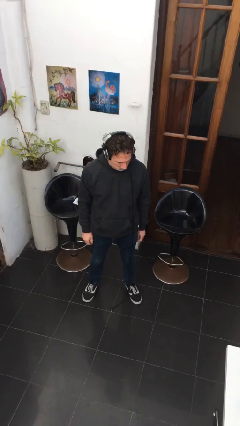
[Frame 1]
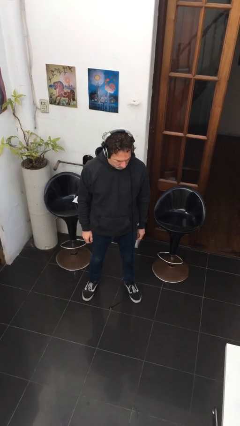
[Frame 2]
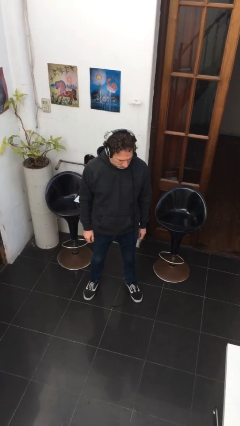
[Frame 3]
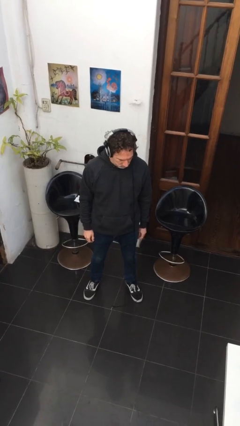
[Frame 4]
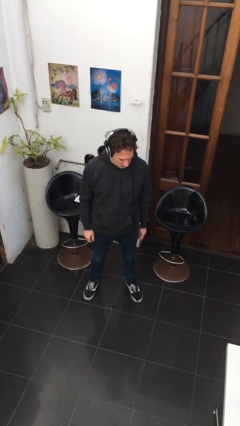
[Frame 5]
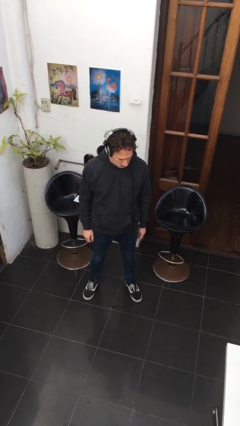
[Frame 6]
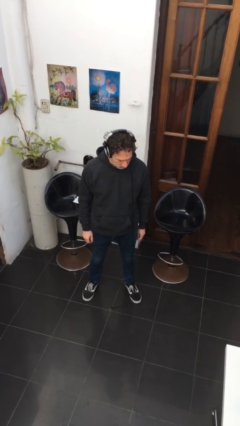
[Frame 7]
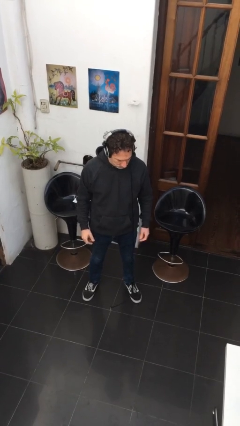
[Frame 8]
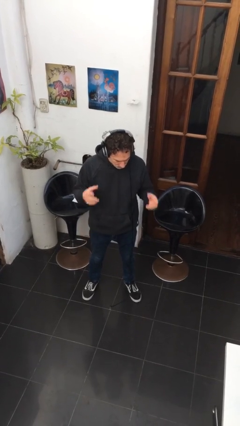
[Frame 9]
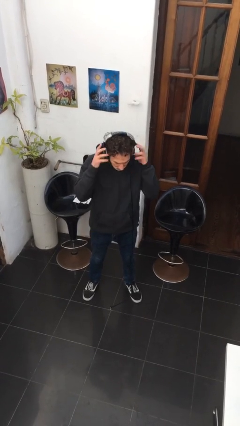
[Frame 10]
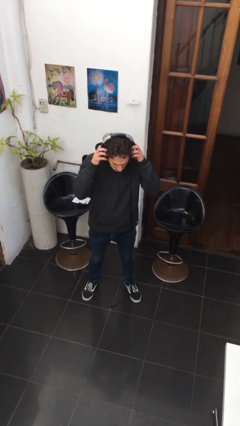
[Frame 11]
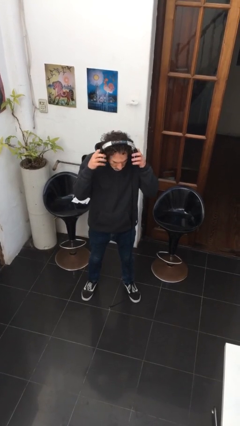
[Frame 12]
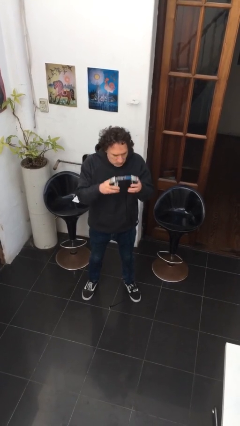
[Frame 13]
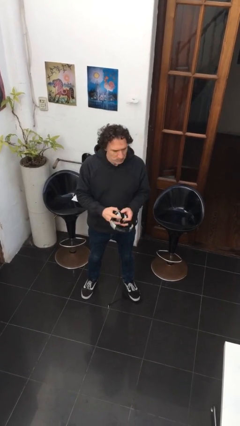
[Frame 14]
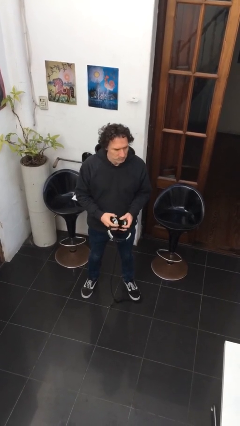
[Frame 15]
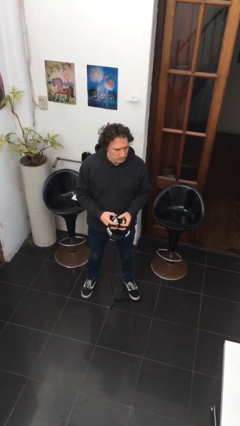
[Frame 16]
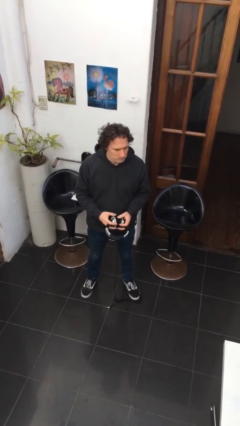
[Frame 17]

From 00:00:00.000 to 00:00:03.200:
person takes off headphones

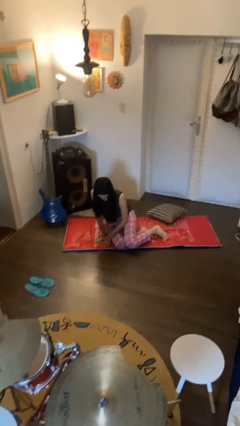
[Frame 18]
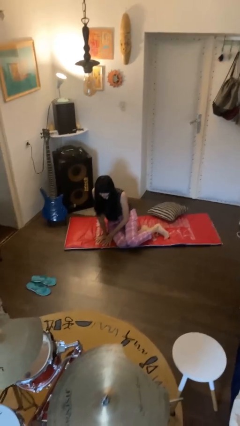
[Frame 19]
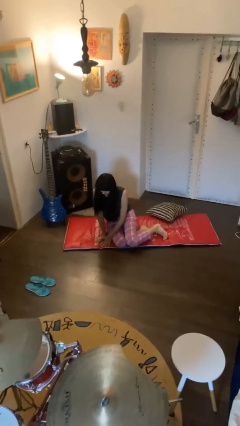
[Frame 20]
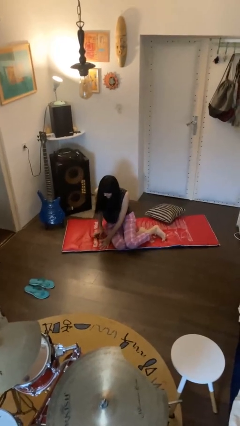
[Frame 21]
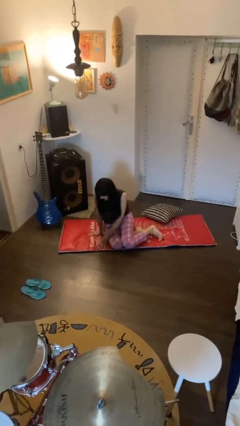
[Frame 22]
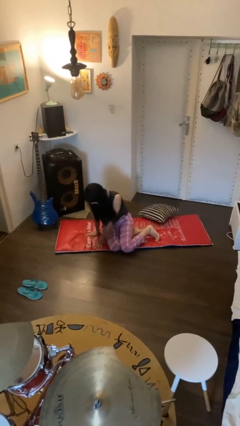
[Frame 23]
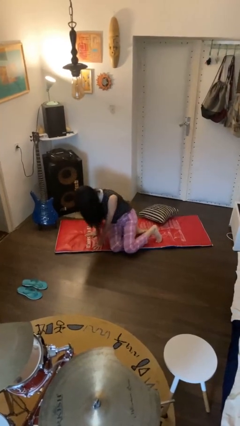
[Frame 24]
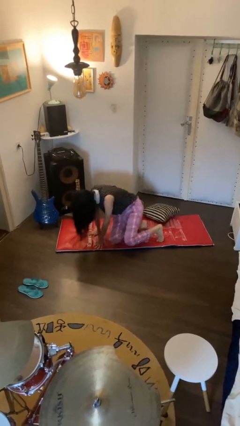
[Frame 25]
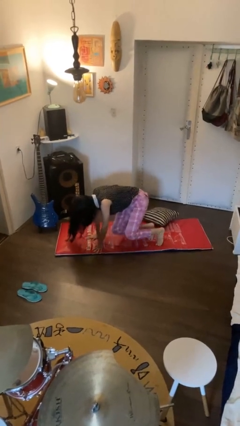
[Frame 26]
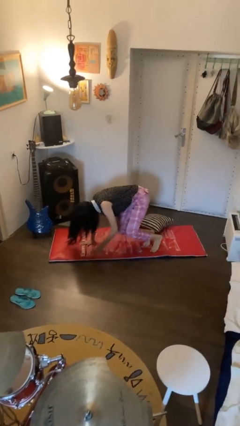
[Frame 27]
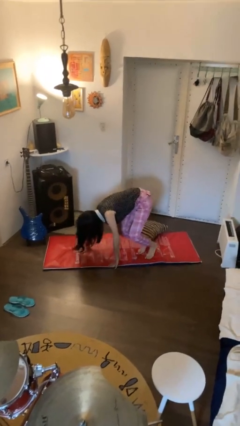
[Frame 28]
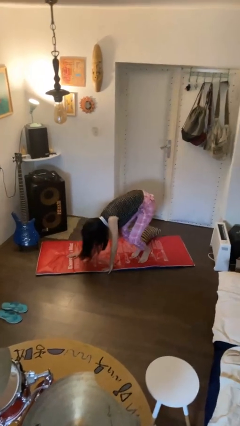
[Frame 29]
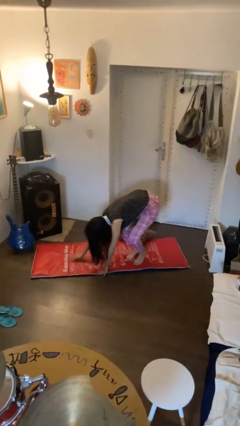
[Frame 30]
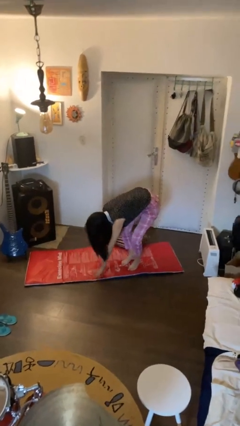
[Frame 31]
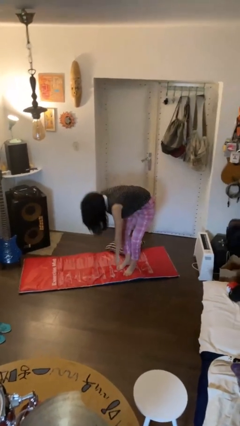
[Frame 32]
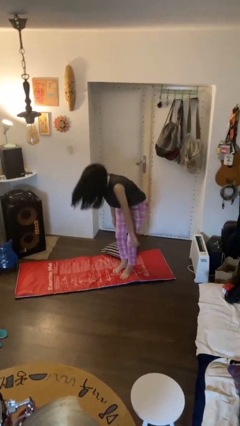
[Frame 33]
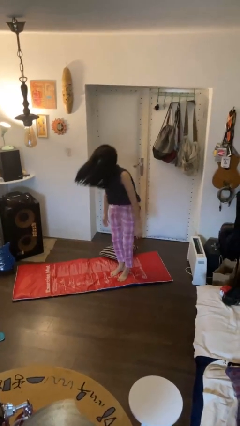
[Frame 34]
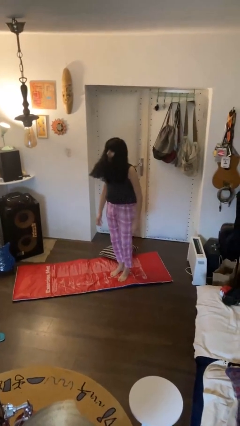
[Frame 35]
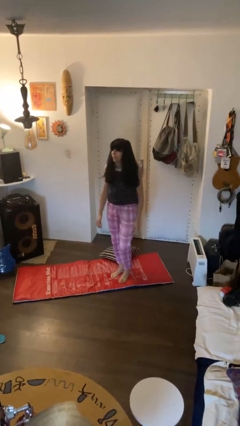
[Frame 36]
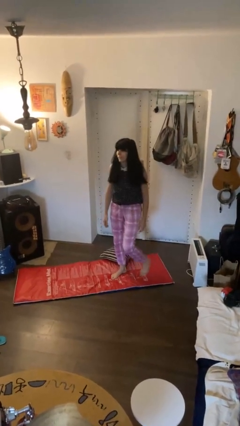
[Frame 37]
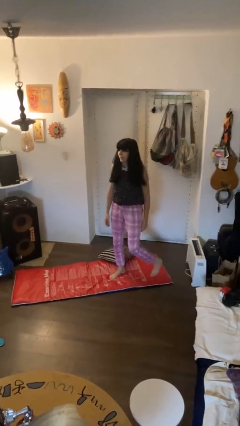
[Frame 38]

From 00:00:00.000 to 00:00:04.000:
person stands up from floor

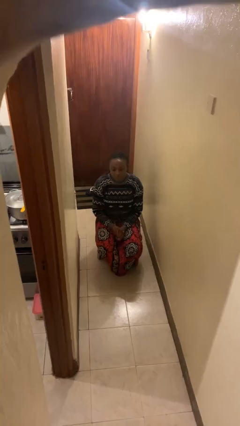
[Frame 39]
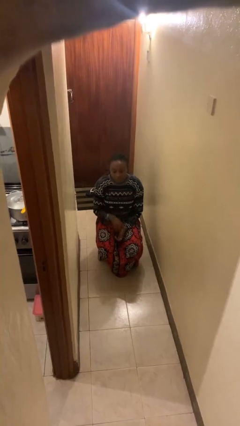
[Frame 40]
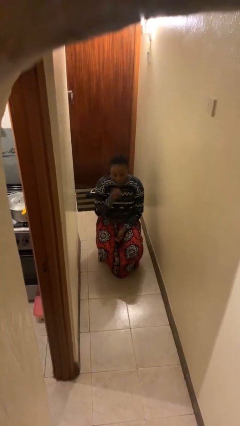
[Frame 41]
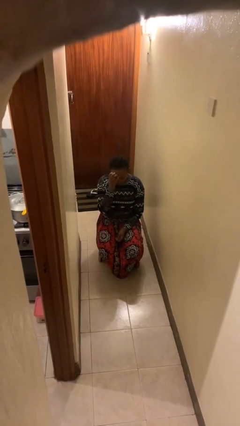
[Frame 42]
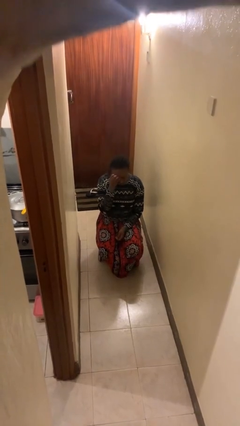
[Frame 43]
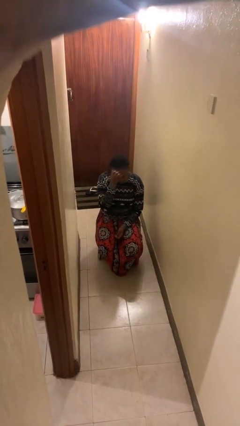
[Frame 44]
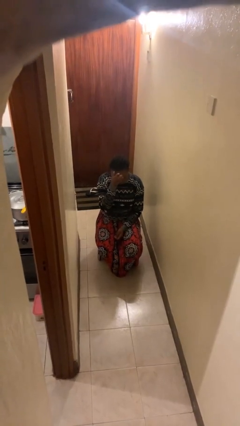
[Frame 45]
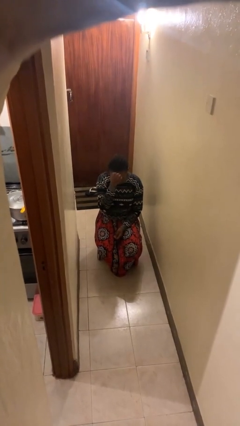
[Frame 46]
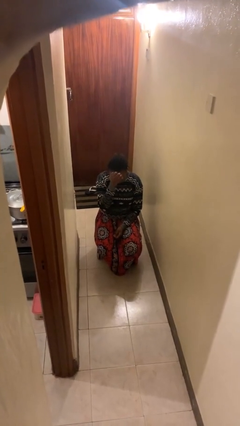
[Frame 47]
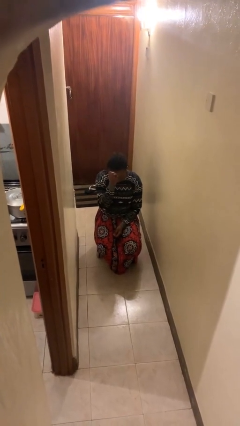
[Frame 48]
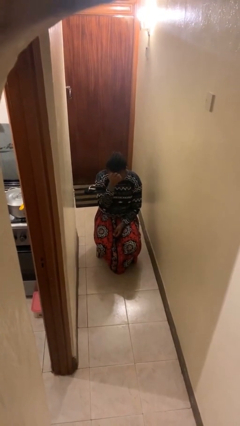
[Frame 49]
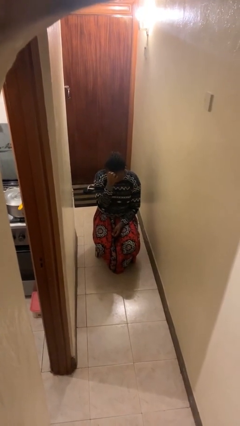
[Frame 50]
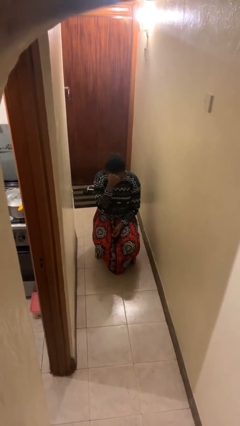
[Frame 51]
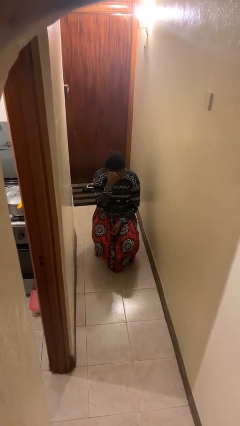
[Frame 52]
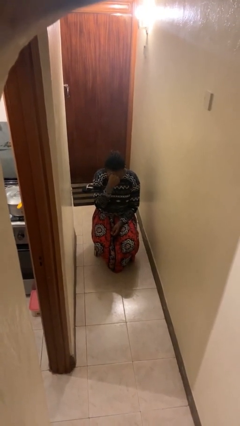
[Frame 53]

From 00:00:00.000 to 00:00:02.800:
person scratches face

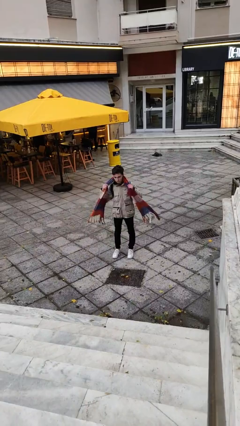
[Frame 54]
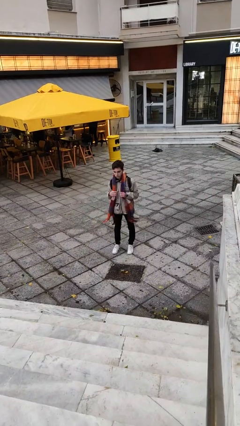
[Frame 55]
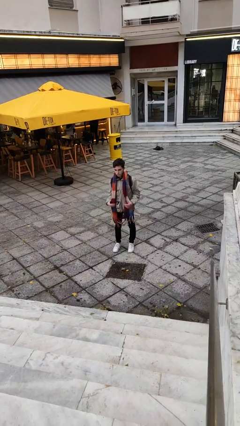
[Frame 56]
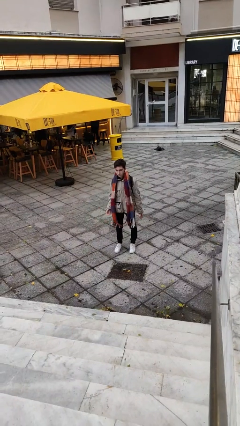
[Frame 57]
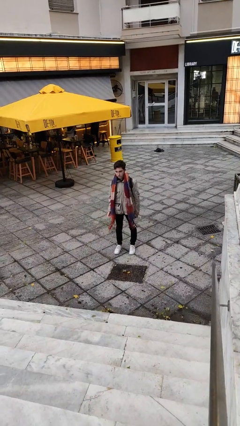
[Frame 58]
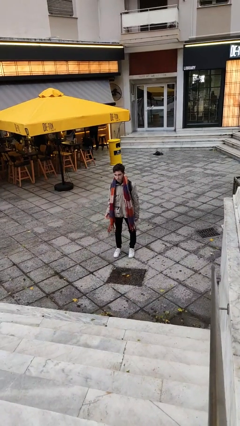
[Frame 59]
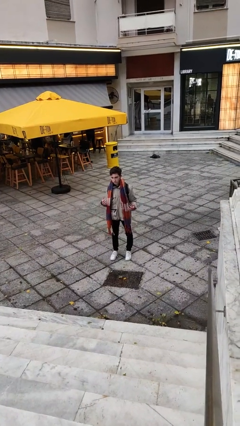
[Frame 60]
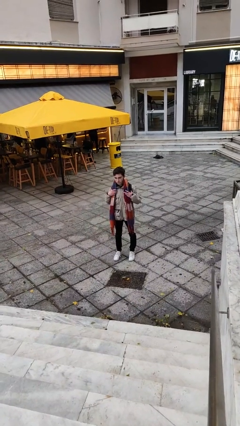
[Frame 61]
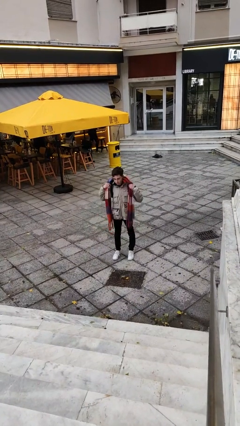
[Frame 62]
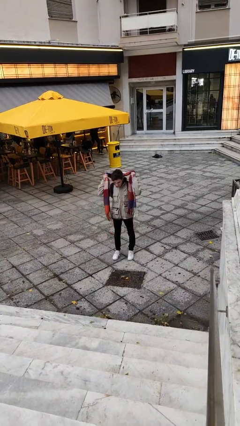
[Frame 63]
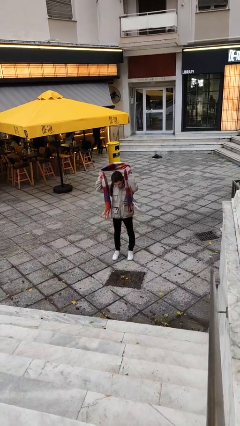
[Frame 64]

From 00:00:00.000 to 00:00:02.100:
person puts on scarf

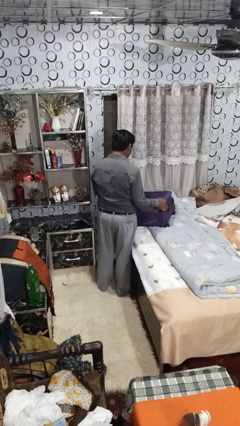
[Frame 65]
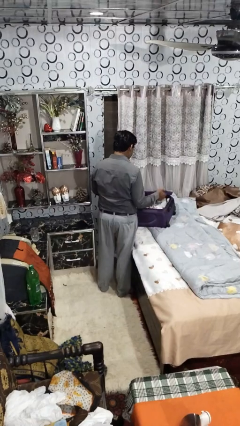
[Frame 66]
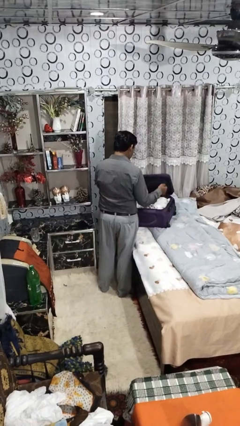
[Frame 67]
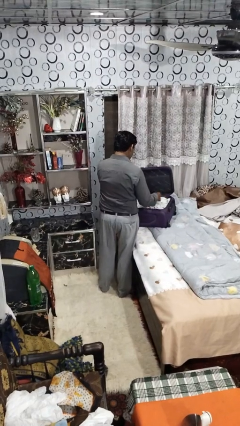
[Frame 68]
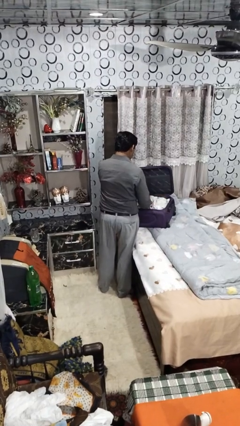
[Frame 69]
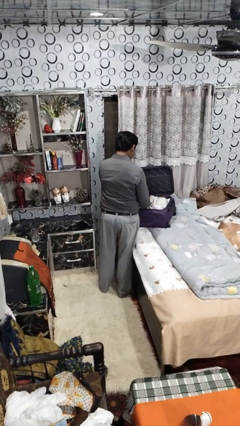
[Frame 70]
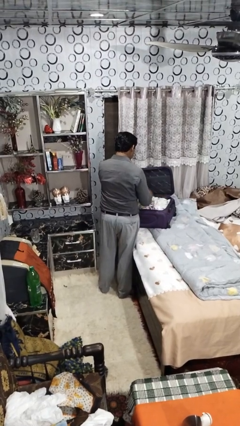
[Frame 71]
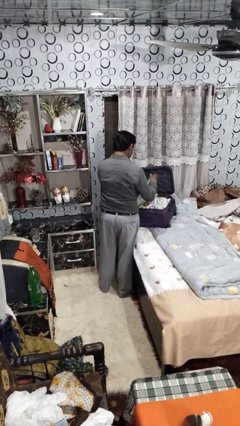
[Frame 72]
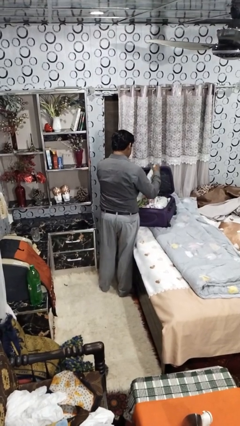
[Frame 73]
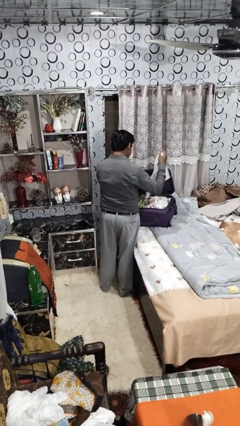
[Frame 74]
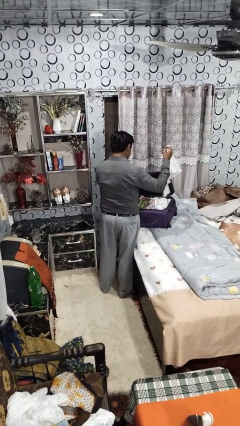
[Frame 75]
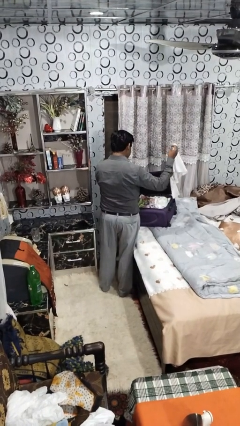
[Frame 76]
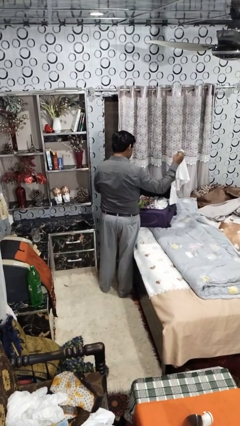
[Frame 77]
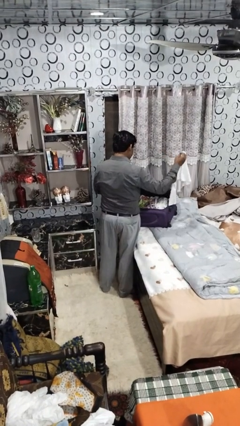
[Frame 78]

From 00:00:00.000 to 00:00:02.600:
person unloads clothes from suitcase

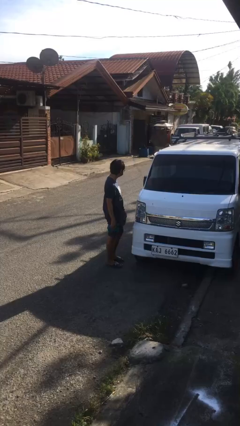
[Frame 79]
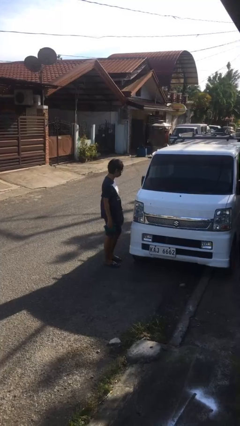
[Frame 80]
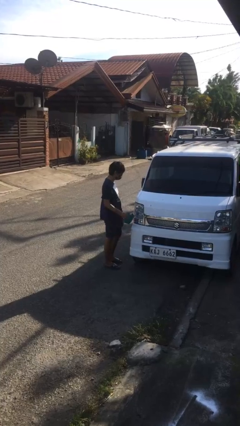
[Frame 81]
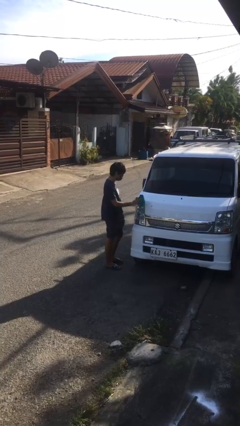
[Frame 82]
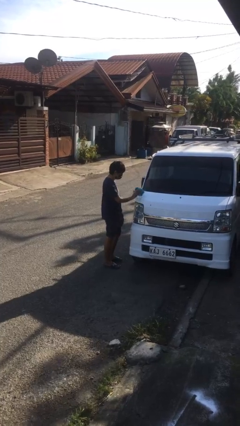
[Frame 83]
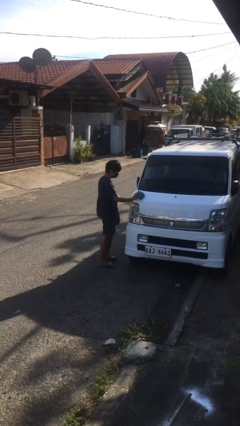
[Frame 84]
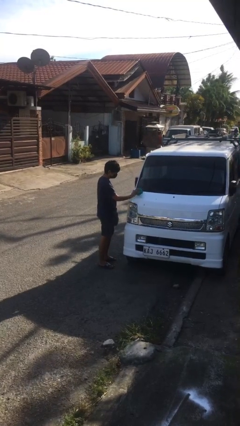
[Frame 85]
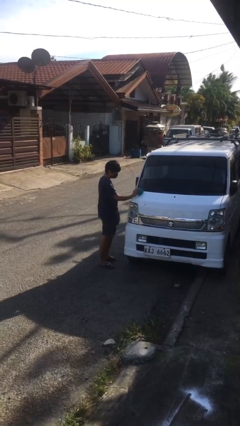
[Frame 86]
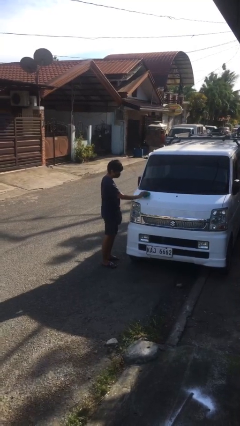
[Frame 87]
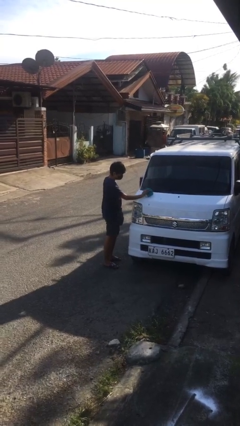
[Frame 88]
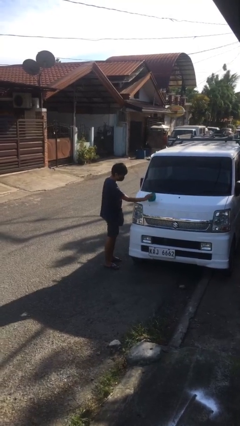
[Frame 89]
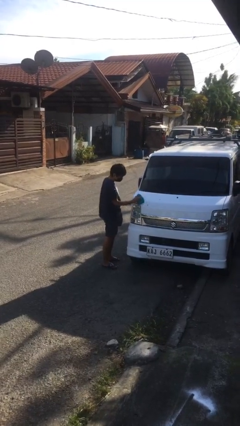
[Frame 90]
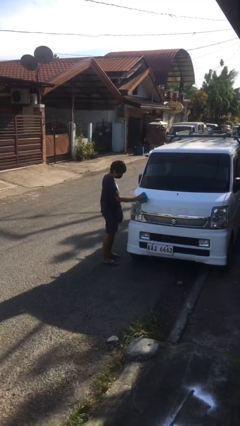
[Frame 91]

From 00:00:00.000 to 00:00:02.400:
person polishes car with rag

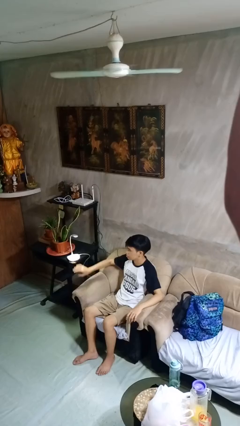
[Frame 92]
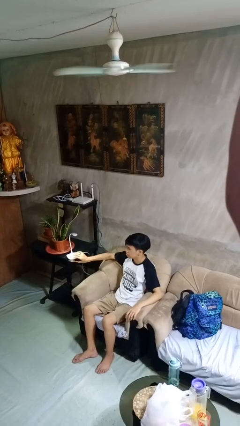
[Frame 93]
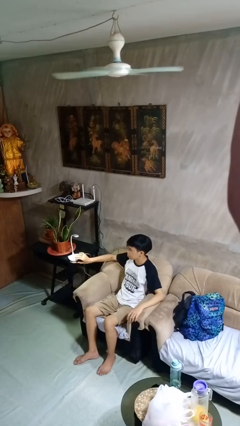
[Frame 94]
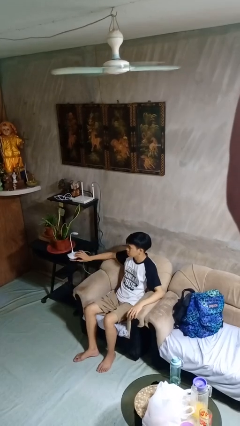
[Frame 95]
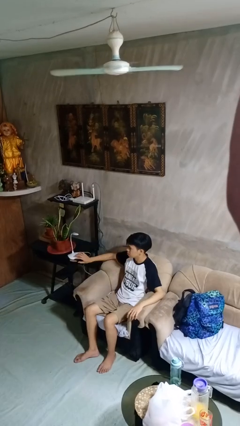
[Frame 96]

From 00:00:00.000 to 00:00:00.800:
person turns off lamp
